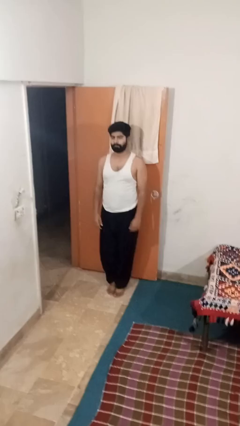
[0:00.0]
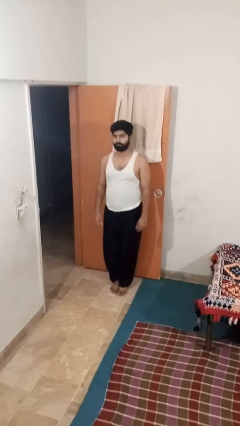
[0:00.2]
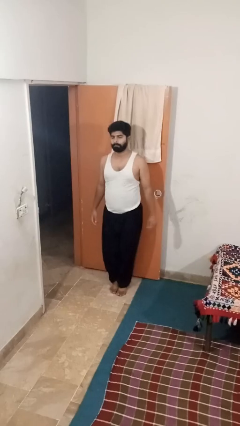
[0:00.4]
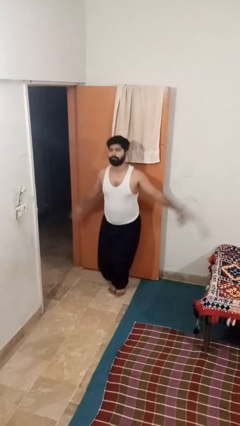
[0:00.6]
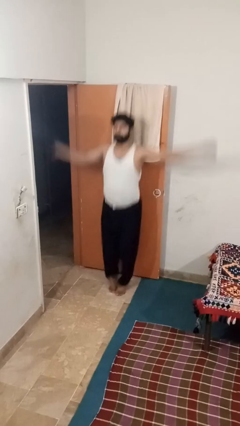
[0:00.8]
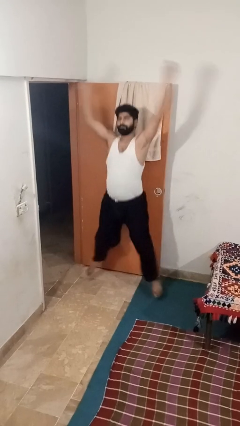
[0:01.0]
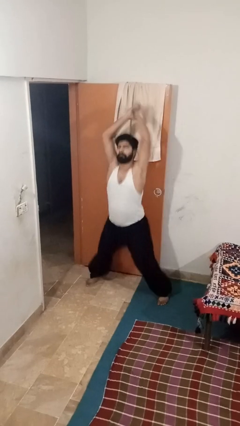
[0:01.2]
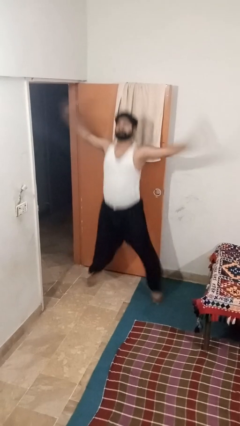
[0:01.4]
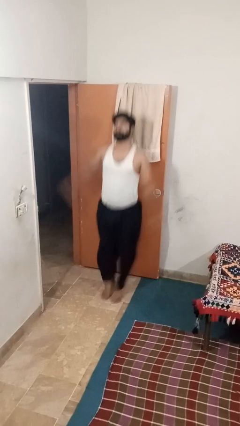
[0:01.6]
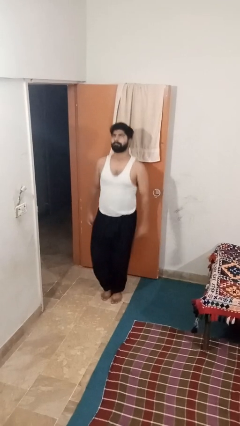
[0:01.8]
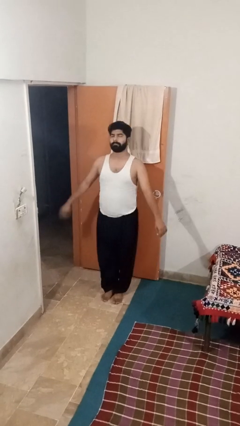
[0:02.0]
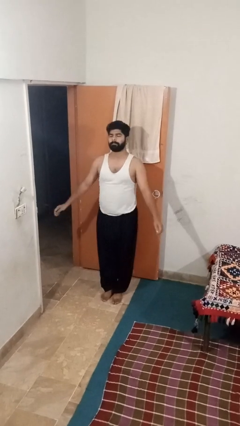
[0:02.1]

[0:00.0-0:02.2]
person exercises with jumping jacks

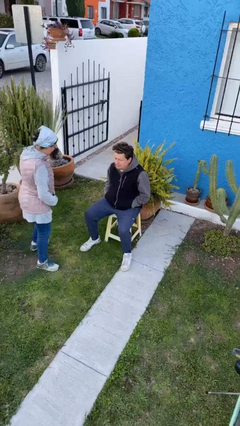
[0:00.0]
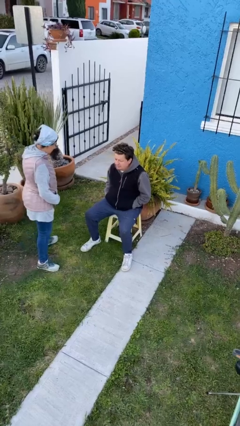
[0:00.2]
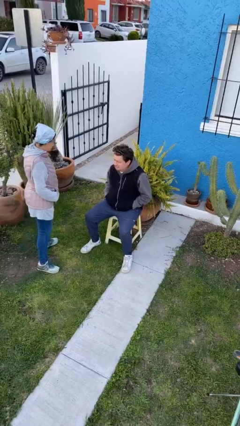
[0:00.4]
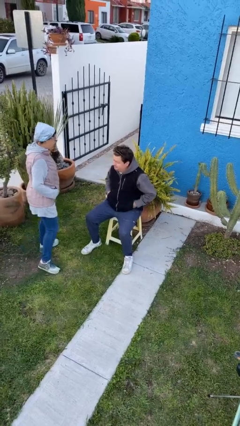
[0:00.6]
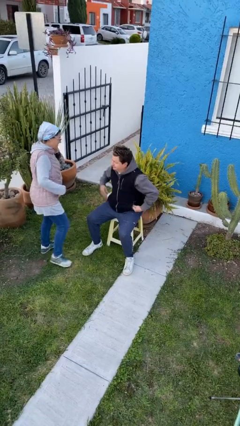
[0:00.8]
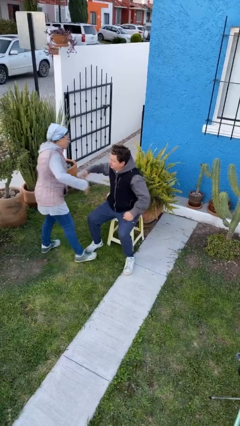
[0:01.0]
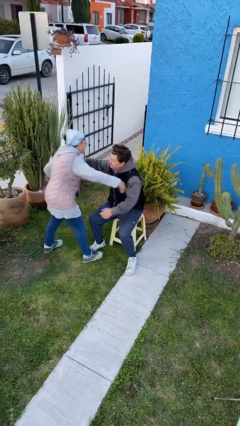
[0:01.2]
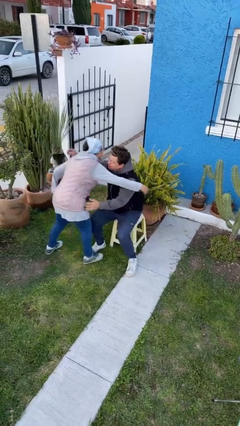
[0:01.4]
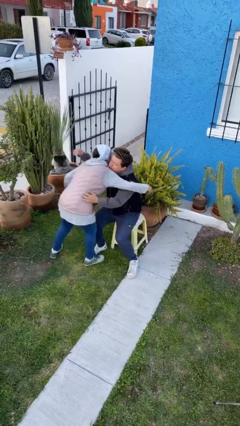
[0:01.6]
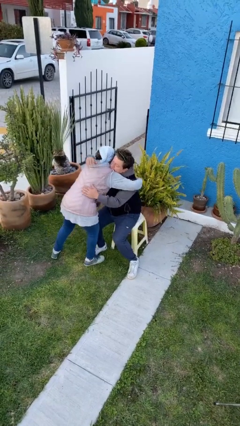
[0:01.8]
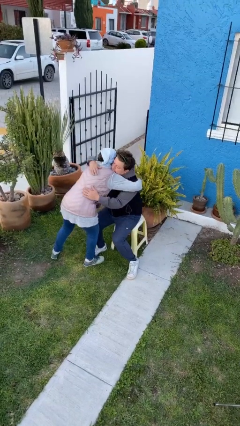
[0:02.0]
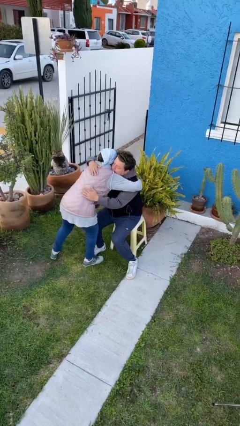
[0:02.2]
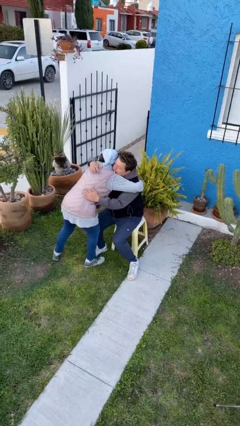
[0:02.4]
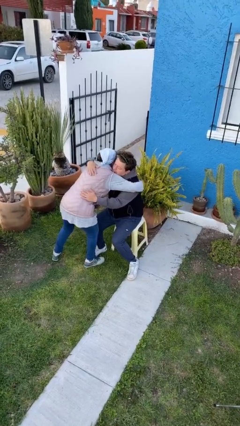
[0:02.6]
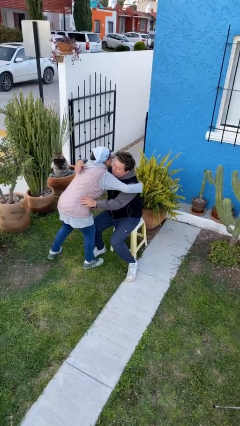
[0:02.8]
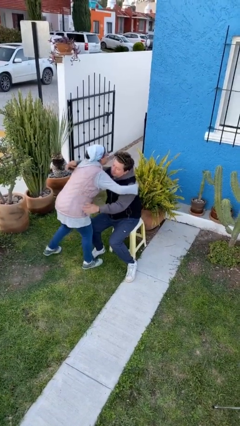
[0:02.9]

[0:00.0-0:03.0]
person embraces person

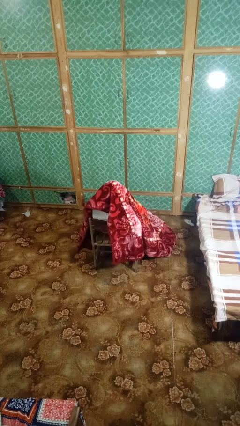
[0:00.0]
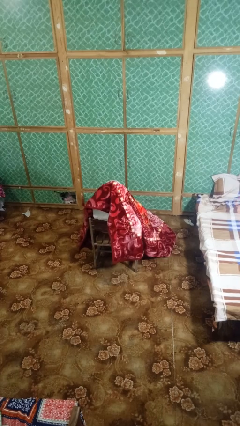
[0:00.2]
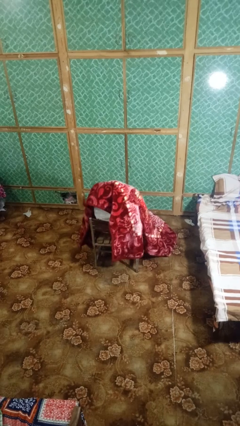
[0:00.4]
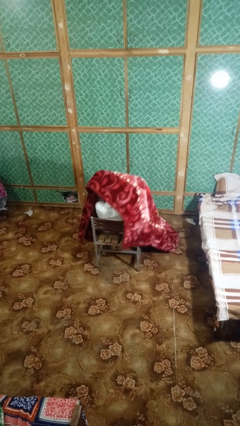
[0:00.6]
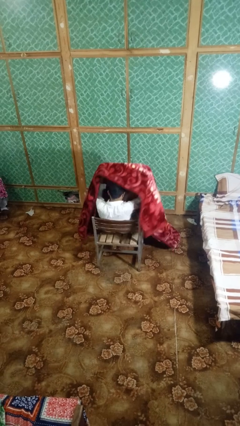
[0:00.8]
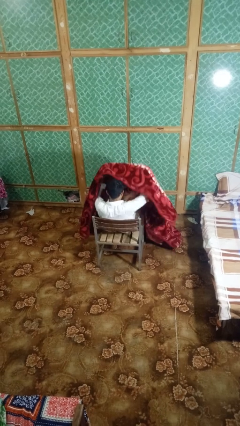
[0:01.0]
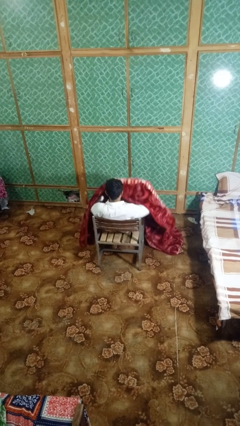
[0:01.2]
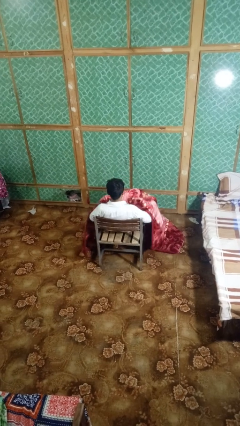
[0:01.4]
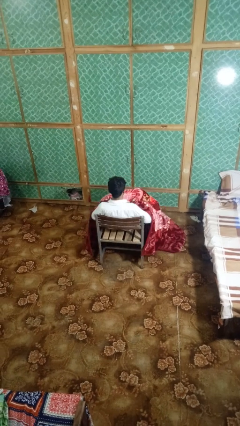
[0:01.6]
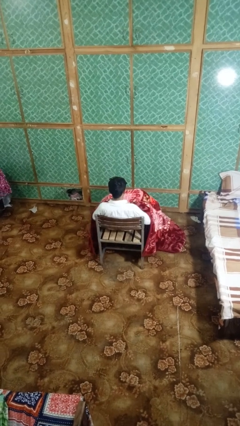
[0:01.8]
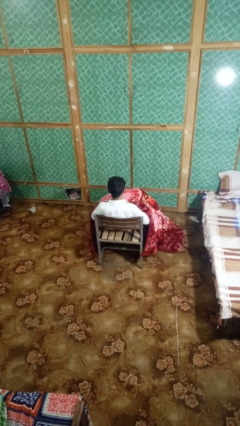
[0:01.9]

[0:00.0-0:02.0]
person uncovers with blanket

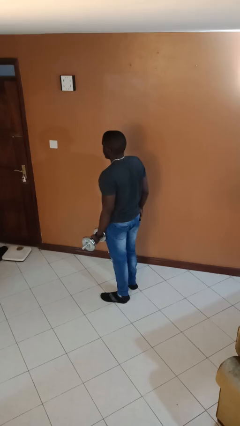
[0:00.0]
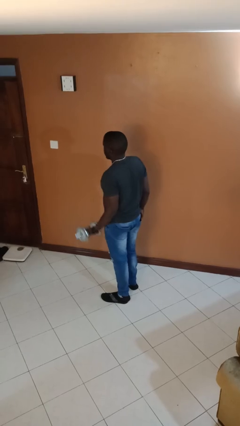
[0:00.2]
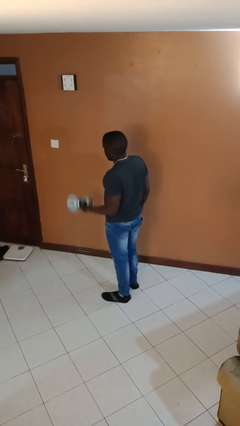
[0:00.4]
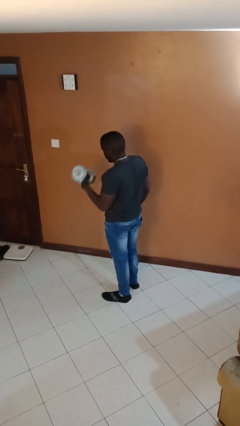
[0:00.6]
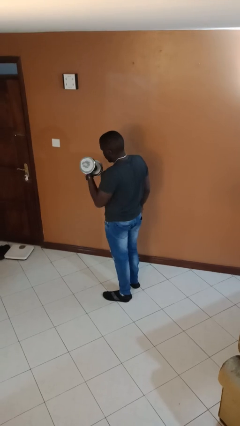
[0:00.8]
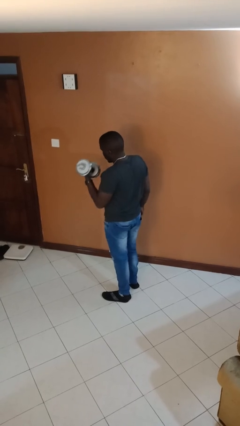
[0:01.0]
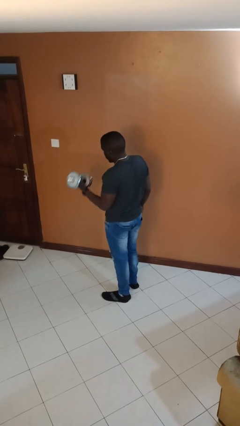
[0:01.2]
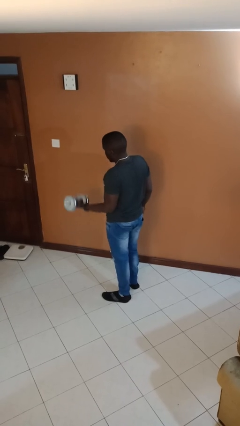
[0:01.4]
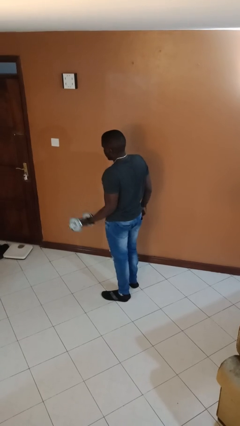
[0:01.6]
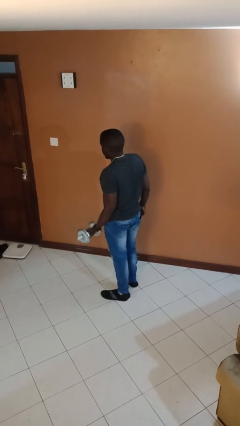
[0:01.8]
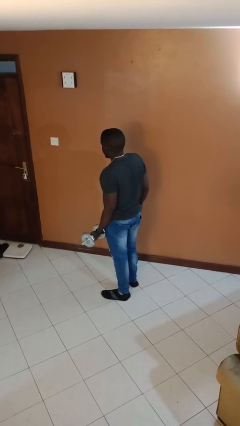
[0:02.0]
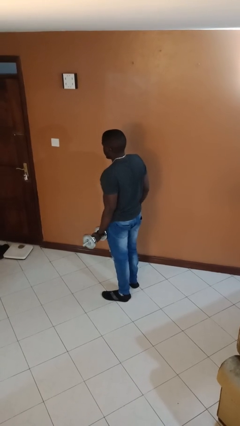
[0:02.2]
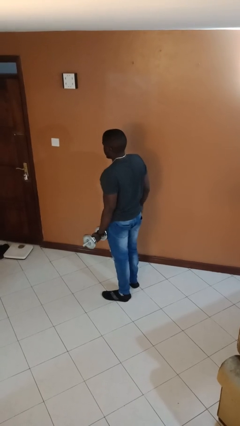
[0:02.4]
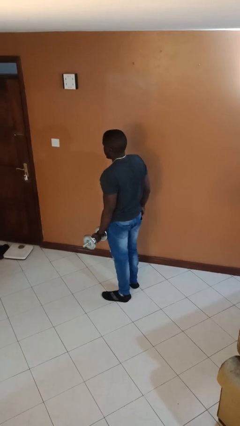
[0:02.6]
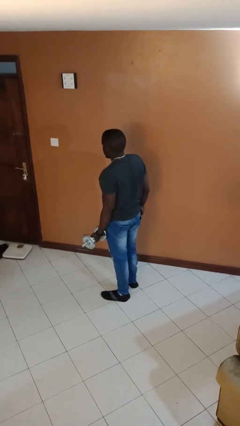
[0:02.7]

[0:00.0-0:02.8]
person lifts dumbbells

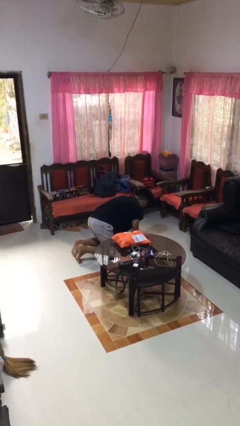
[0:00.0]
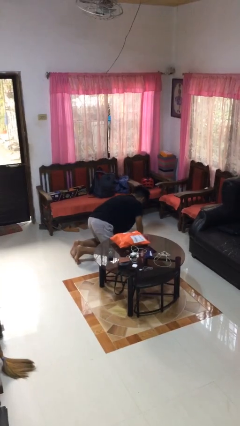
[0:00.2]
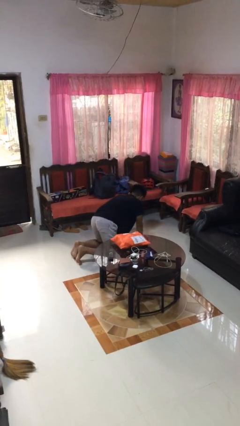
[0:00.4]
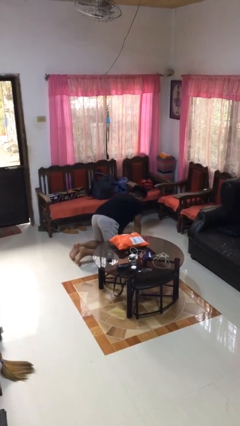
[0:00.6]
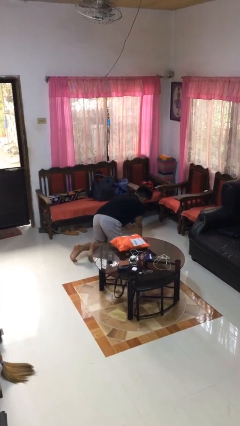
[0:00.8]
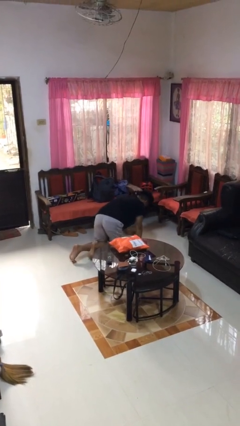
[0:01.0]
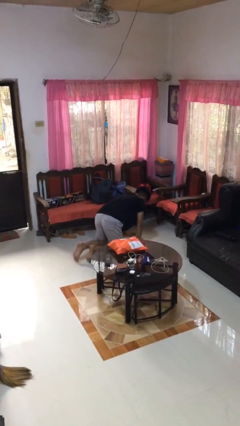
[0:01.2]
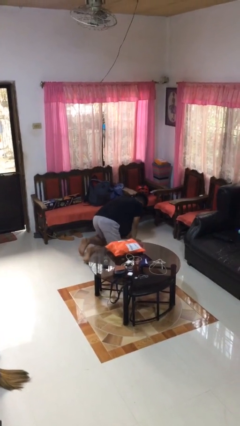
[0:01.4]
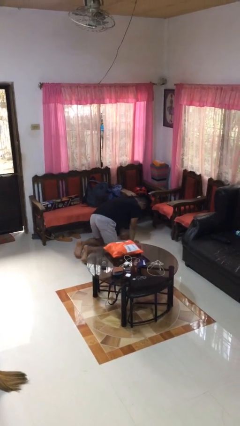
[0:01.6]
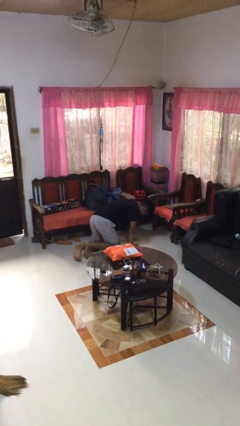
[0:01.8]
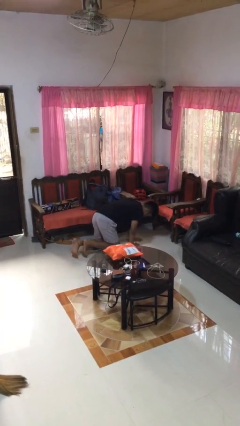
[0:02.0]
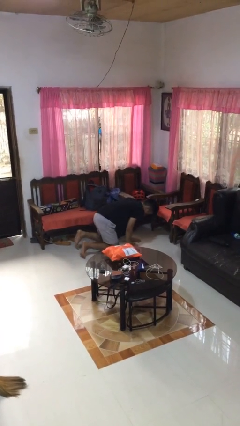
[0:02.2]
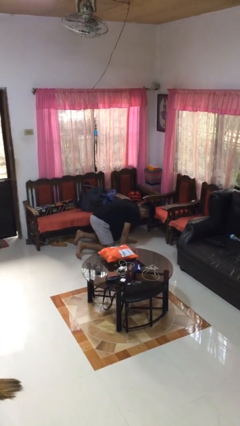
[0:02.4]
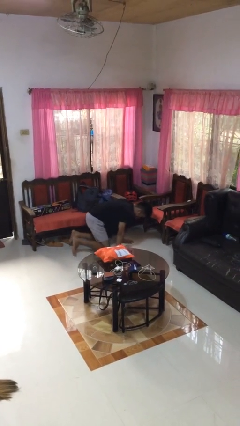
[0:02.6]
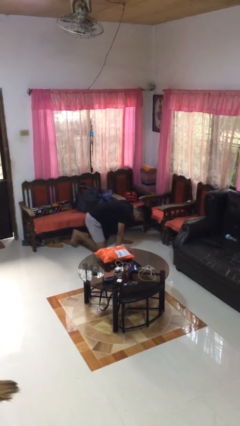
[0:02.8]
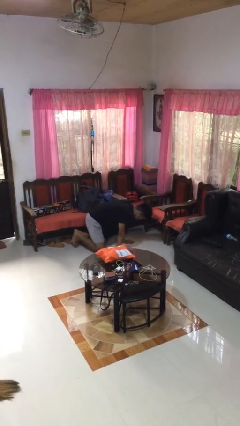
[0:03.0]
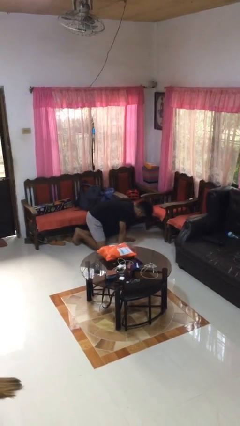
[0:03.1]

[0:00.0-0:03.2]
person crawls

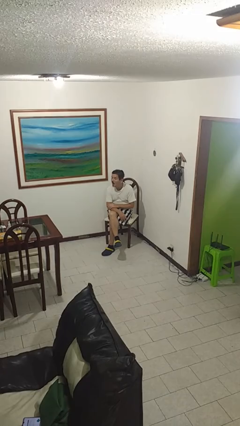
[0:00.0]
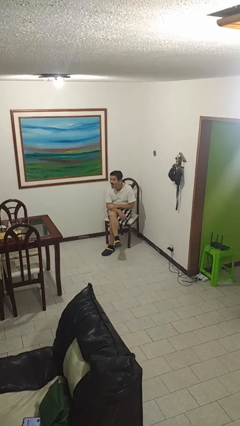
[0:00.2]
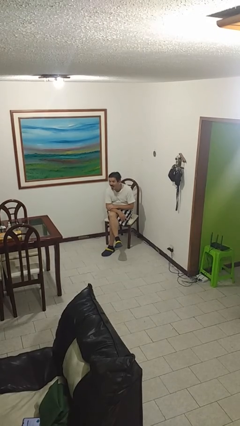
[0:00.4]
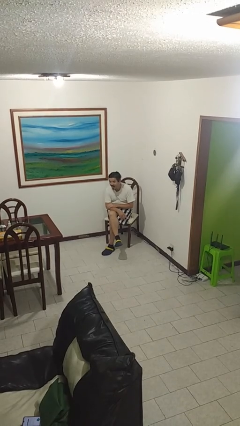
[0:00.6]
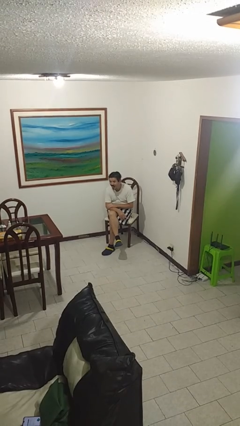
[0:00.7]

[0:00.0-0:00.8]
person sticks out tongue

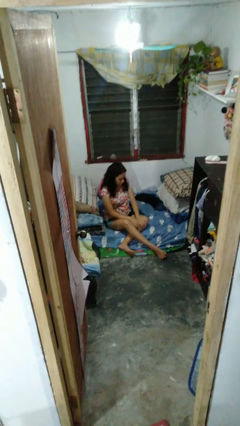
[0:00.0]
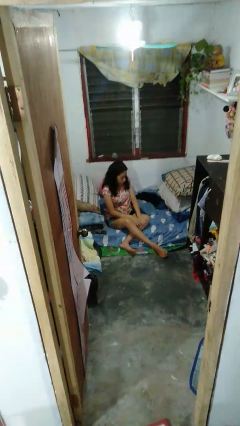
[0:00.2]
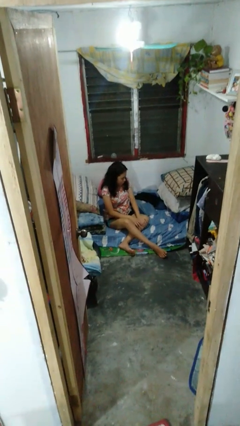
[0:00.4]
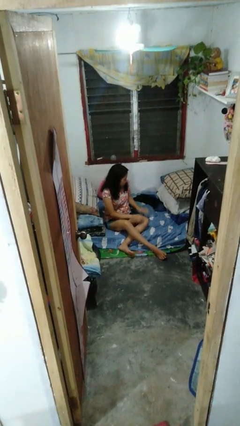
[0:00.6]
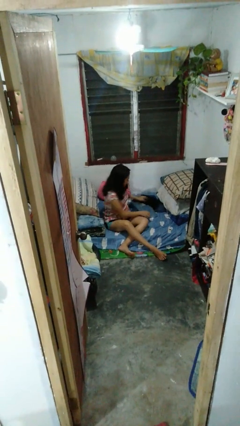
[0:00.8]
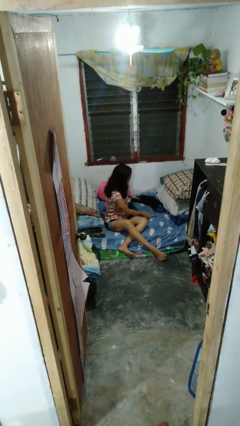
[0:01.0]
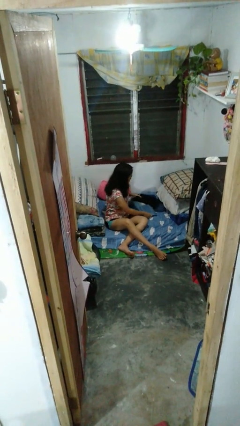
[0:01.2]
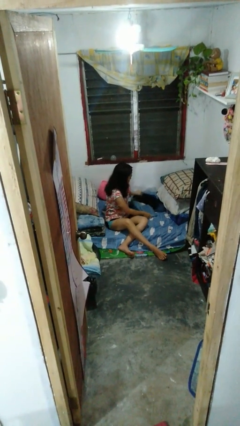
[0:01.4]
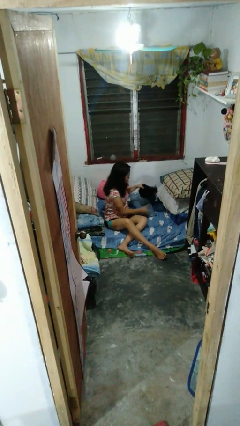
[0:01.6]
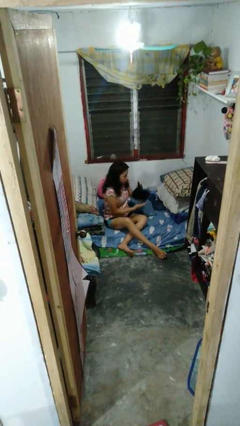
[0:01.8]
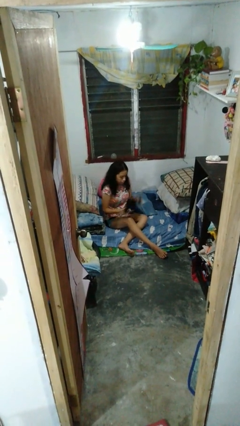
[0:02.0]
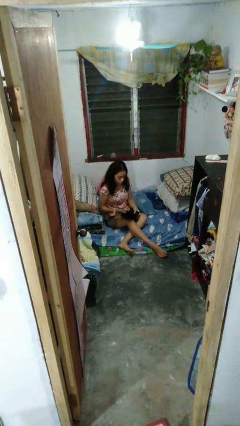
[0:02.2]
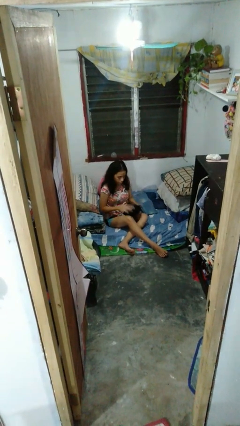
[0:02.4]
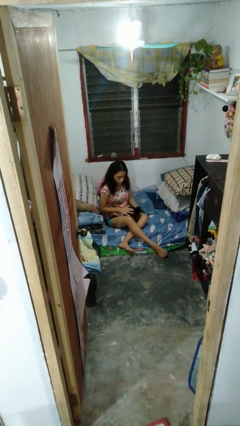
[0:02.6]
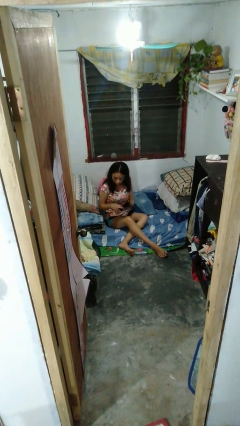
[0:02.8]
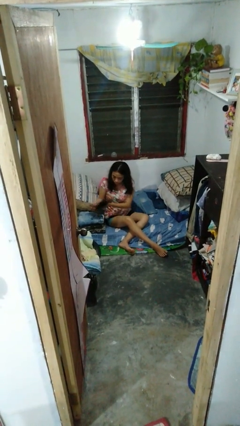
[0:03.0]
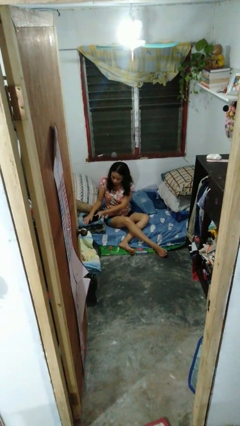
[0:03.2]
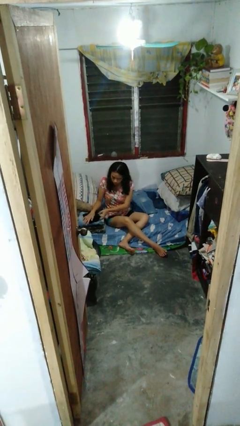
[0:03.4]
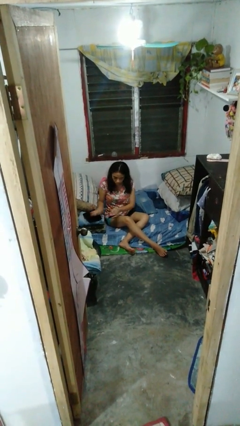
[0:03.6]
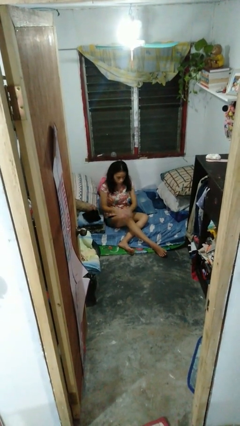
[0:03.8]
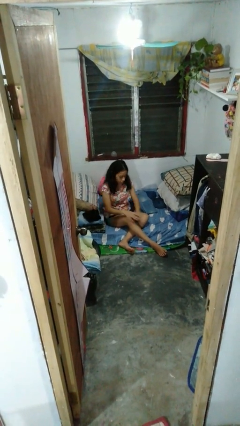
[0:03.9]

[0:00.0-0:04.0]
person folds pants
